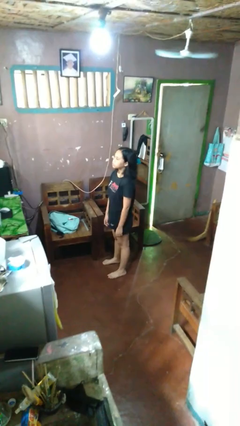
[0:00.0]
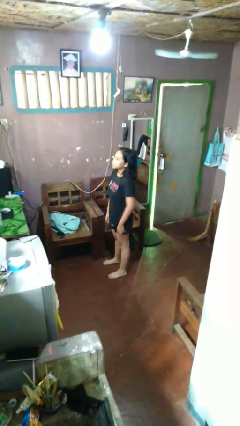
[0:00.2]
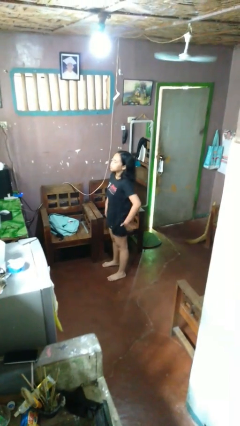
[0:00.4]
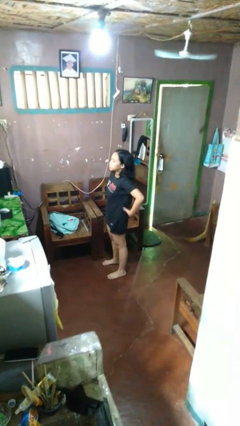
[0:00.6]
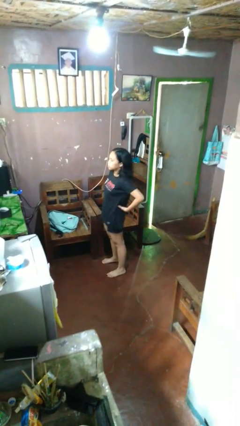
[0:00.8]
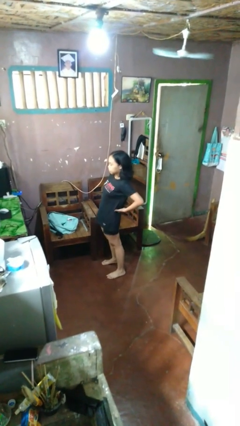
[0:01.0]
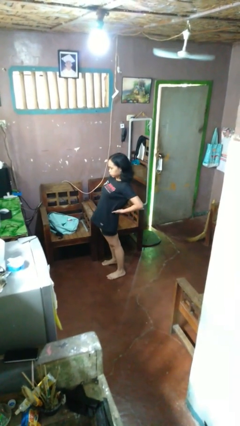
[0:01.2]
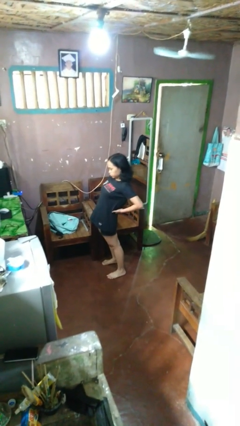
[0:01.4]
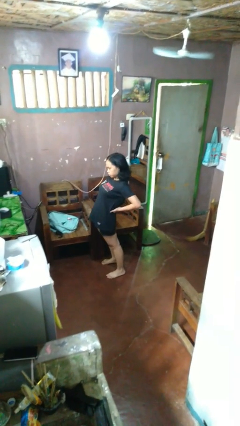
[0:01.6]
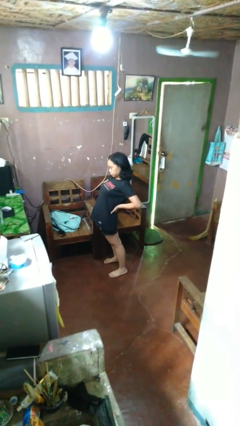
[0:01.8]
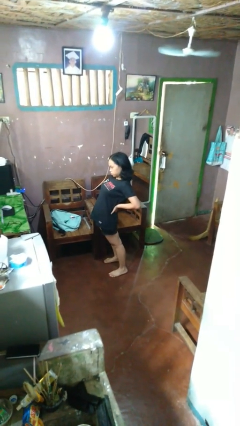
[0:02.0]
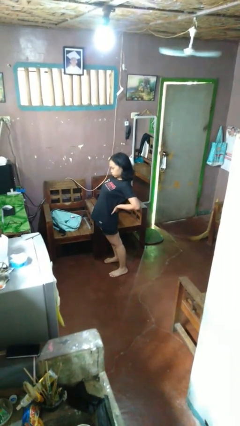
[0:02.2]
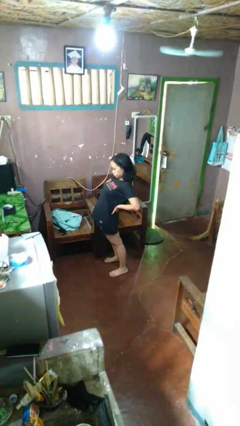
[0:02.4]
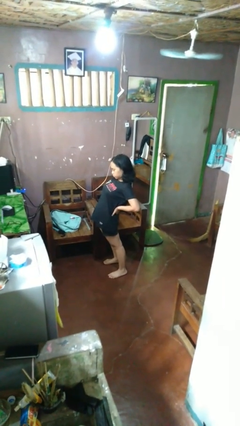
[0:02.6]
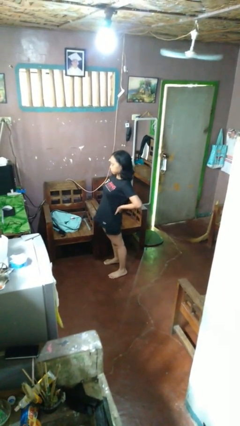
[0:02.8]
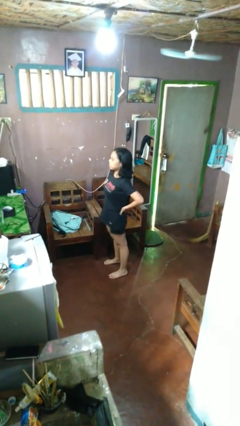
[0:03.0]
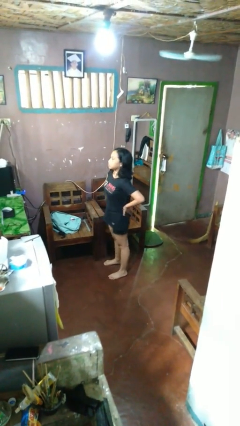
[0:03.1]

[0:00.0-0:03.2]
person stretches back

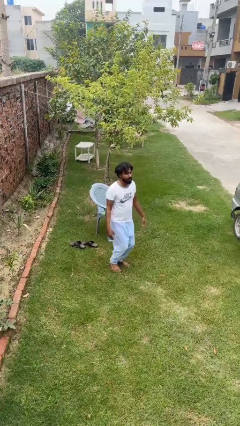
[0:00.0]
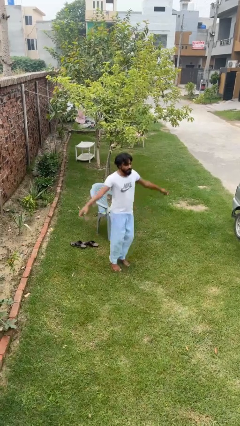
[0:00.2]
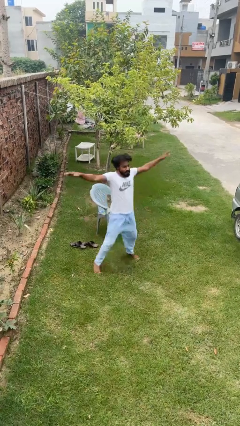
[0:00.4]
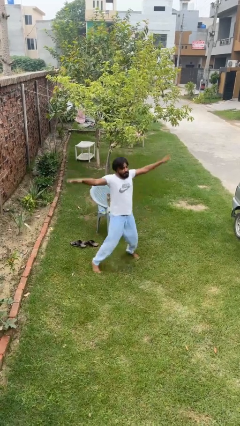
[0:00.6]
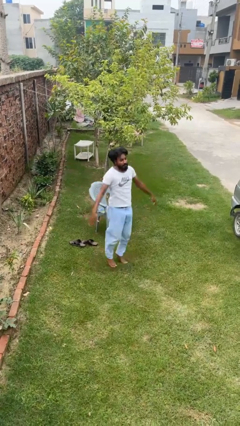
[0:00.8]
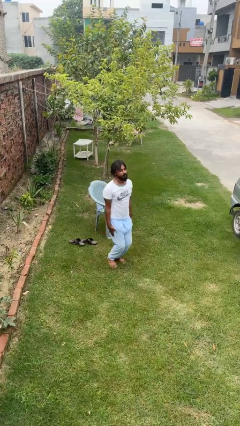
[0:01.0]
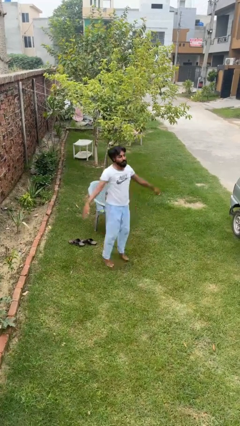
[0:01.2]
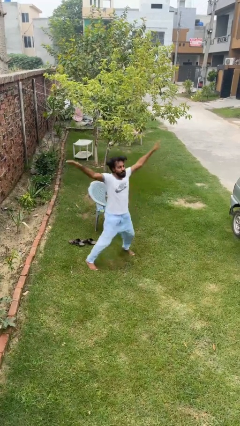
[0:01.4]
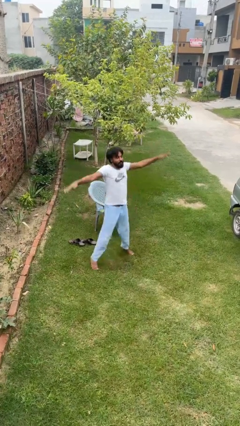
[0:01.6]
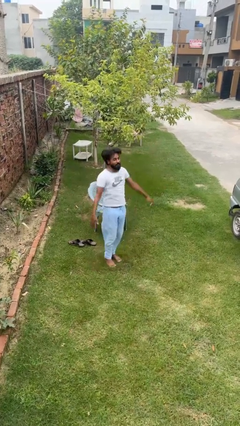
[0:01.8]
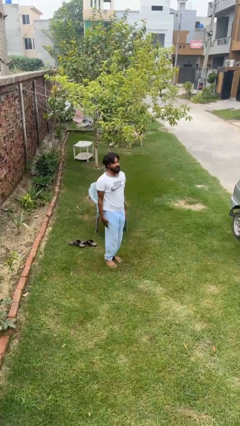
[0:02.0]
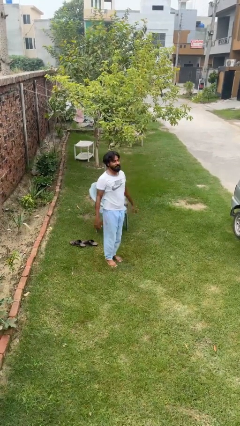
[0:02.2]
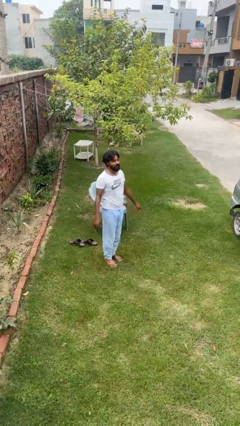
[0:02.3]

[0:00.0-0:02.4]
person exercises with jumping jacks

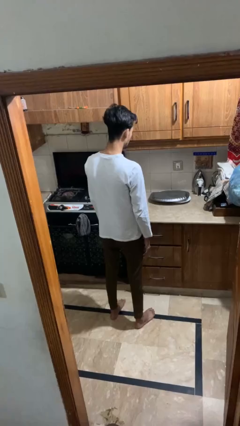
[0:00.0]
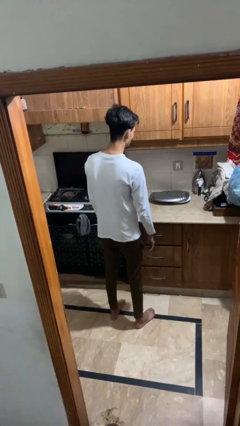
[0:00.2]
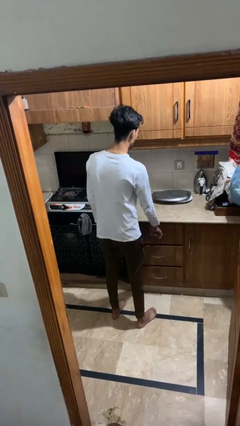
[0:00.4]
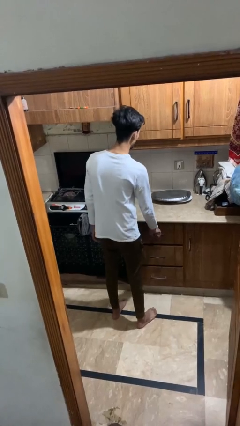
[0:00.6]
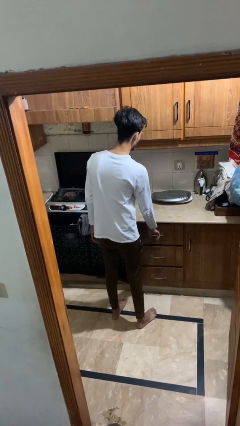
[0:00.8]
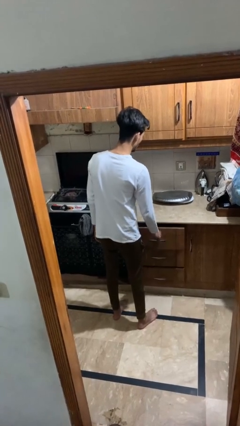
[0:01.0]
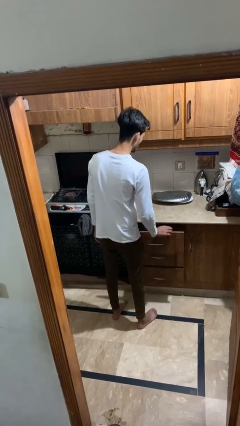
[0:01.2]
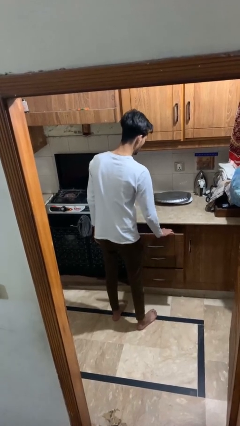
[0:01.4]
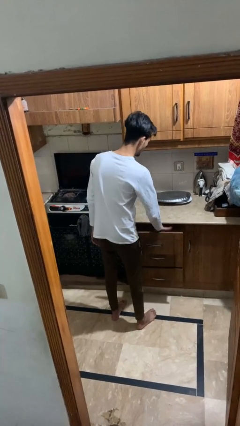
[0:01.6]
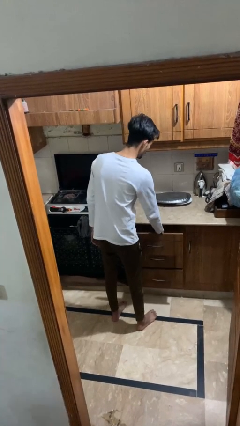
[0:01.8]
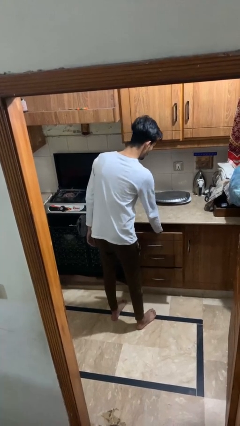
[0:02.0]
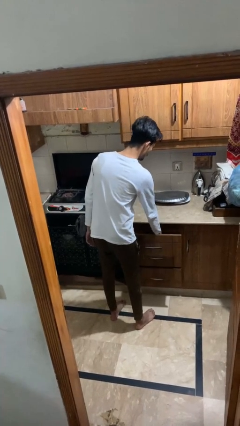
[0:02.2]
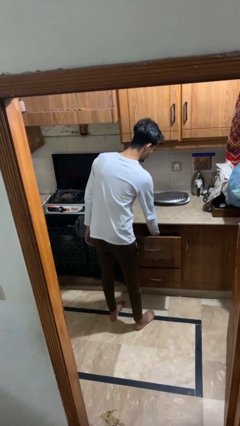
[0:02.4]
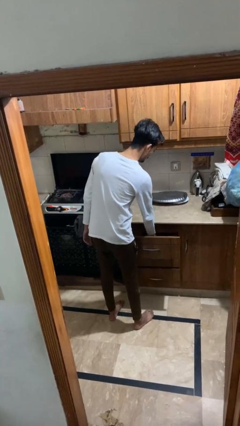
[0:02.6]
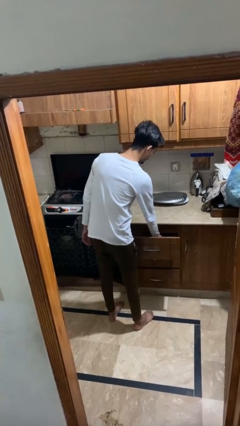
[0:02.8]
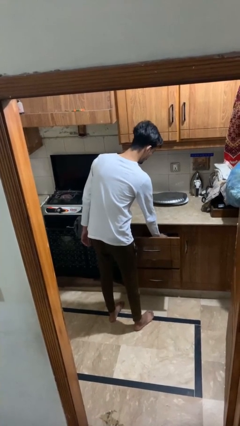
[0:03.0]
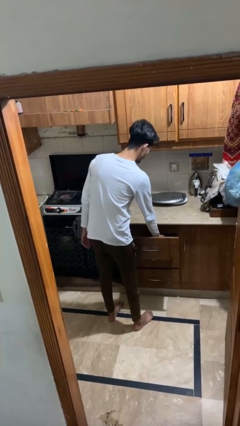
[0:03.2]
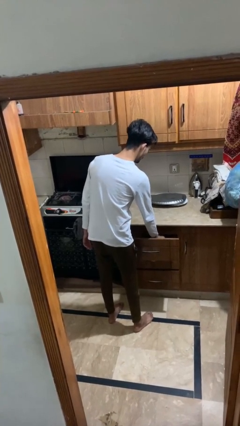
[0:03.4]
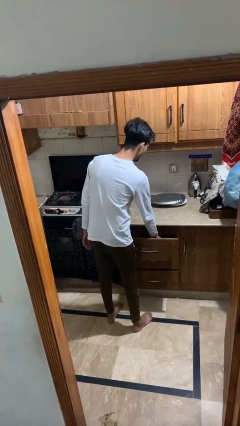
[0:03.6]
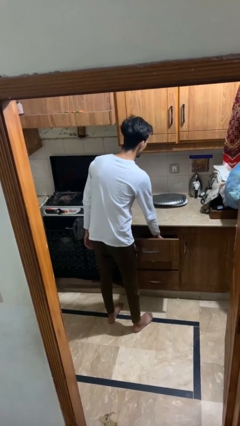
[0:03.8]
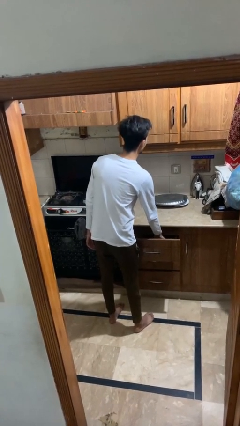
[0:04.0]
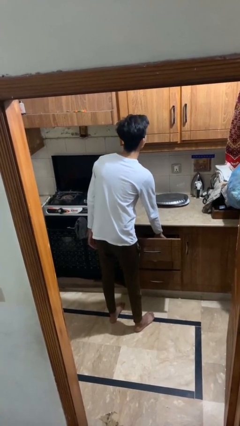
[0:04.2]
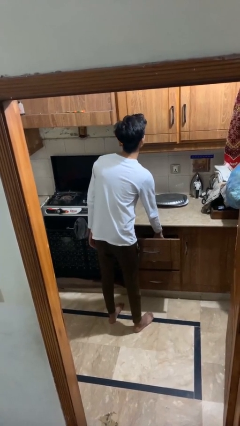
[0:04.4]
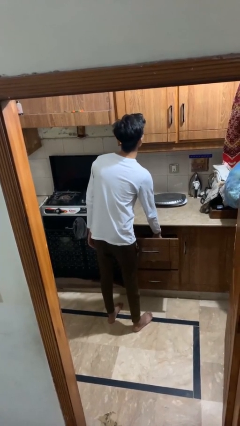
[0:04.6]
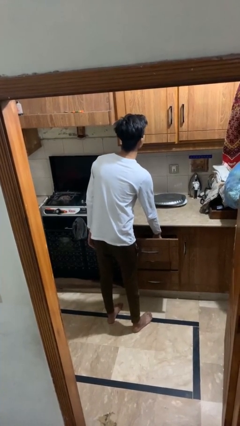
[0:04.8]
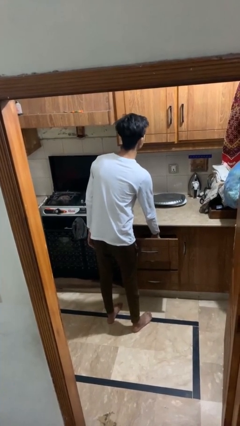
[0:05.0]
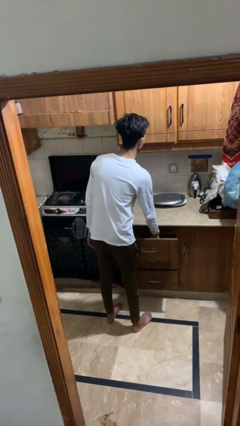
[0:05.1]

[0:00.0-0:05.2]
person searches in kitchen drawer

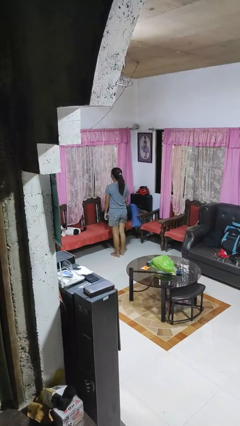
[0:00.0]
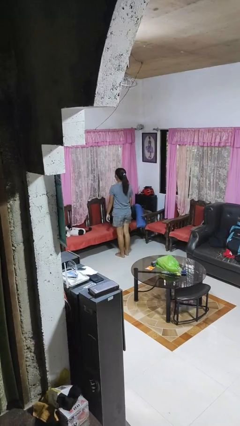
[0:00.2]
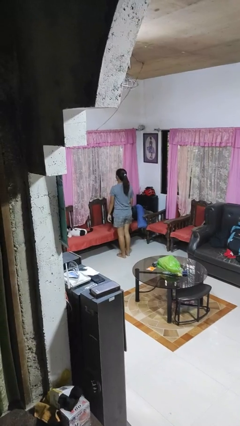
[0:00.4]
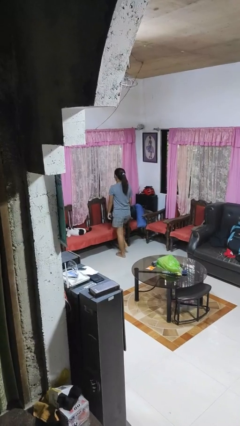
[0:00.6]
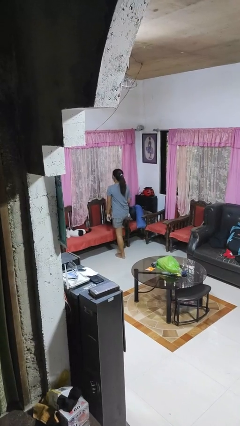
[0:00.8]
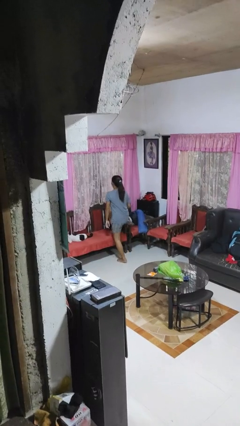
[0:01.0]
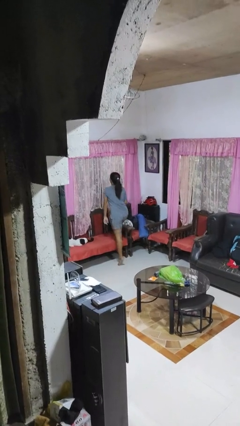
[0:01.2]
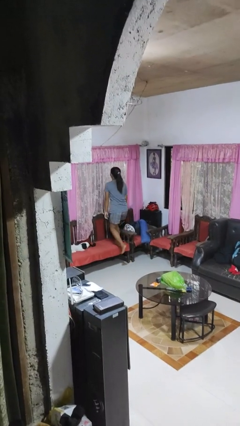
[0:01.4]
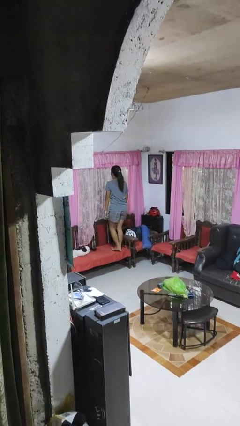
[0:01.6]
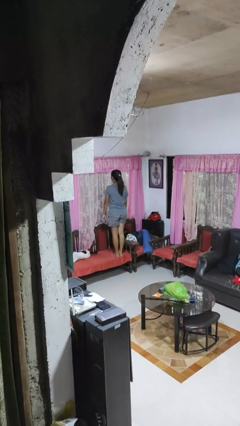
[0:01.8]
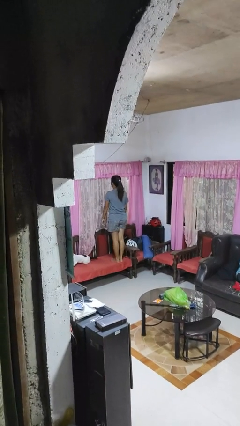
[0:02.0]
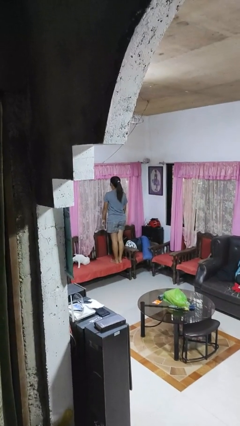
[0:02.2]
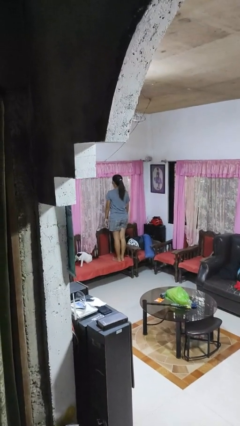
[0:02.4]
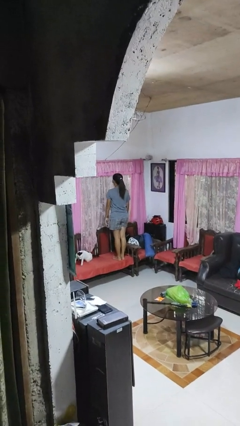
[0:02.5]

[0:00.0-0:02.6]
person climbs on chair

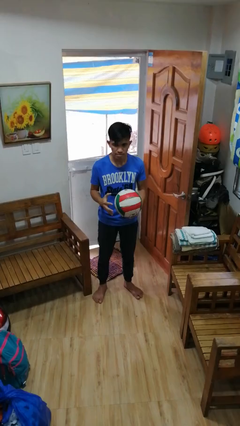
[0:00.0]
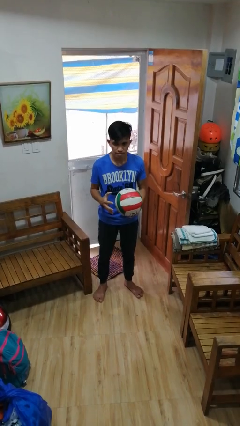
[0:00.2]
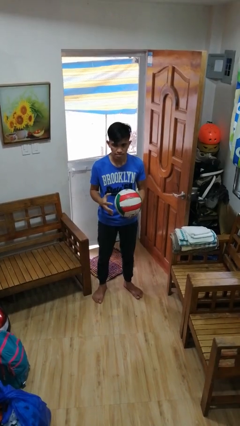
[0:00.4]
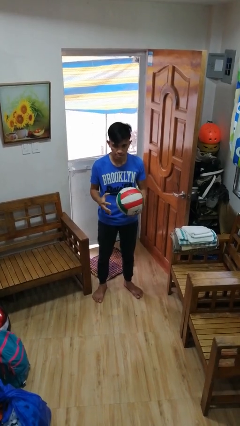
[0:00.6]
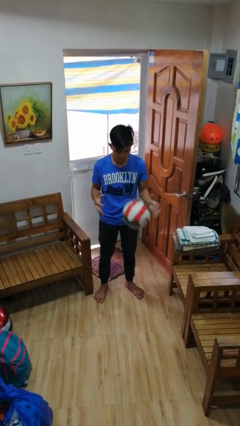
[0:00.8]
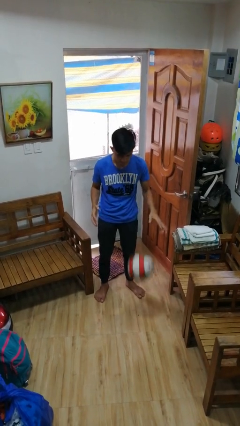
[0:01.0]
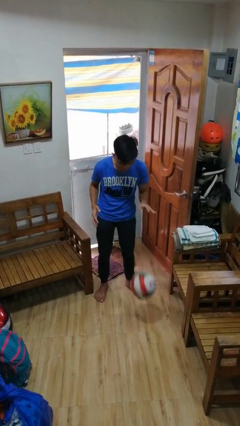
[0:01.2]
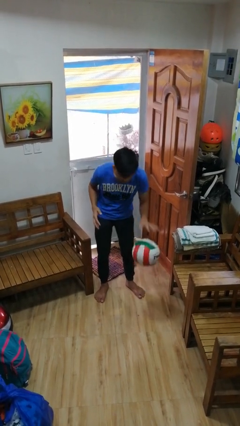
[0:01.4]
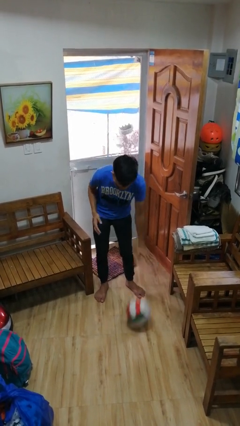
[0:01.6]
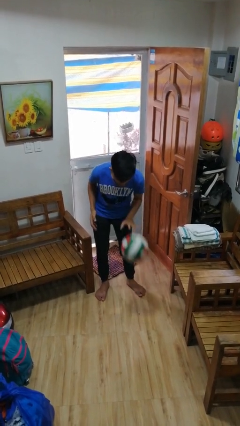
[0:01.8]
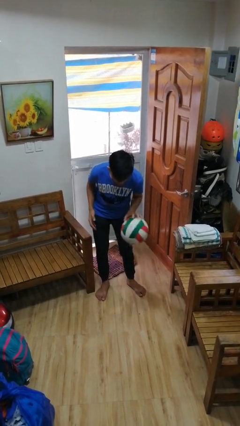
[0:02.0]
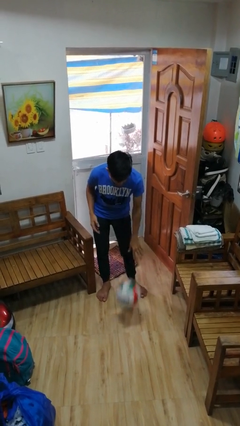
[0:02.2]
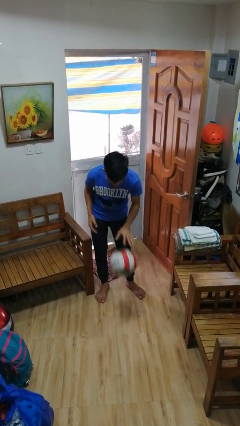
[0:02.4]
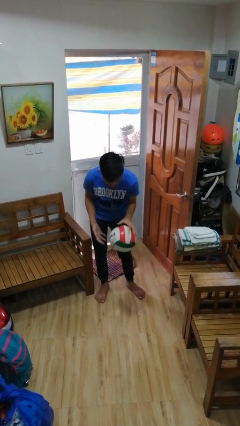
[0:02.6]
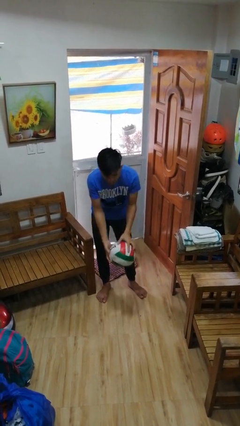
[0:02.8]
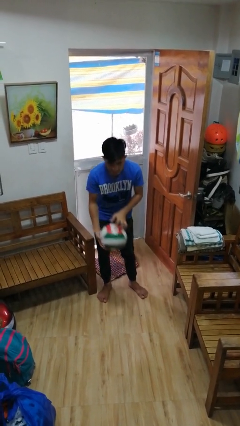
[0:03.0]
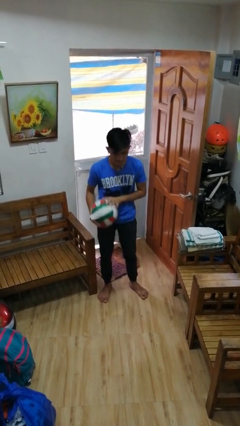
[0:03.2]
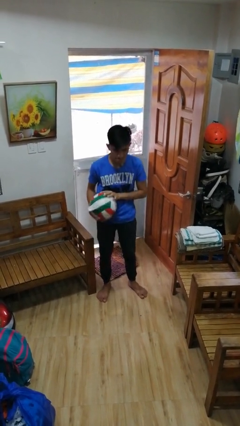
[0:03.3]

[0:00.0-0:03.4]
person bounces ball on floor

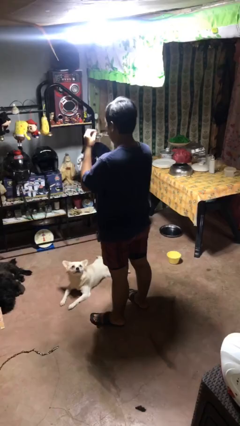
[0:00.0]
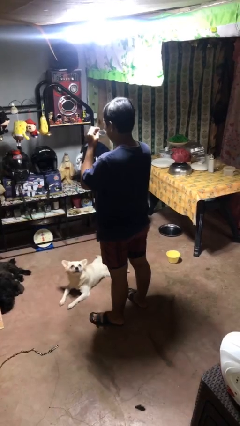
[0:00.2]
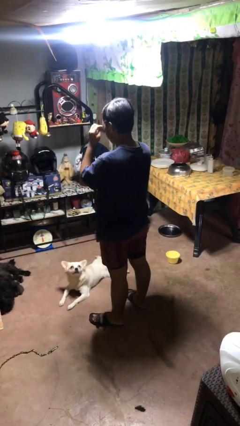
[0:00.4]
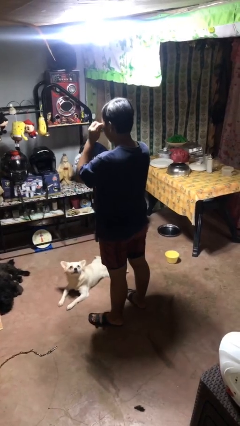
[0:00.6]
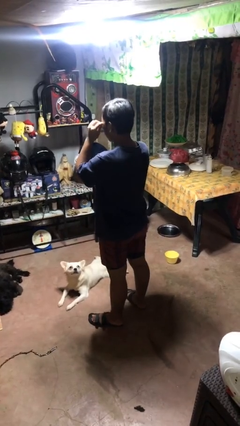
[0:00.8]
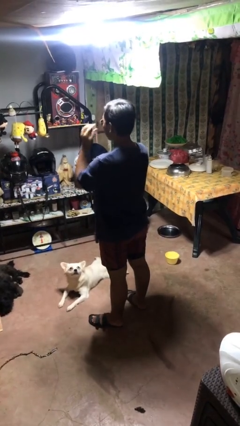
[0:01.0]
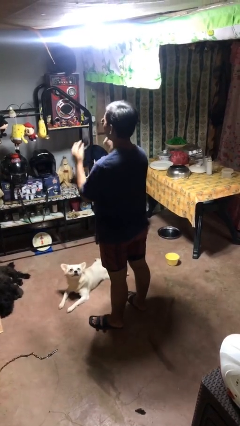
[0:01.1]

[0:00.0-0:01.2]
person puts on sunglasses
